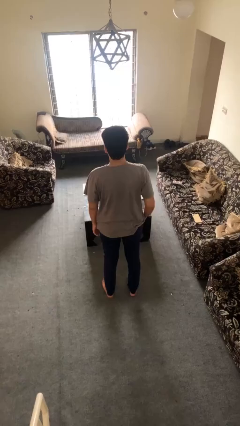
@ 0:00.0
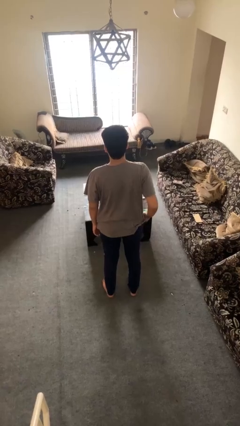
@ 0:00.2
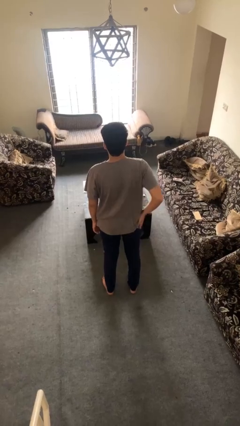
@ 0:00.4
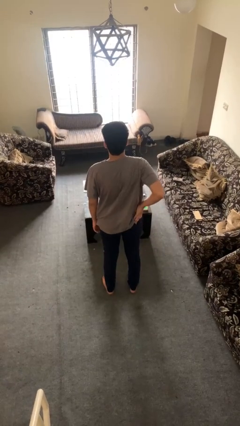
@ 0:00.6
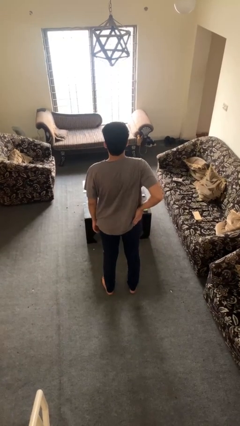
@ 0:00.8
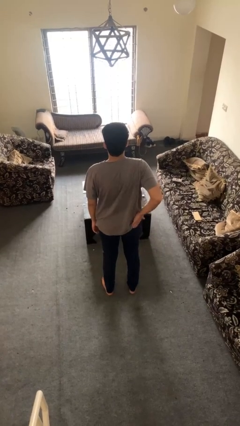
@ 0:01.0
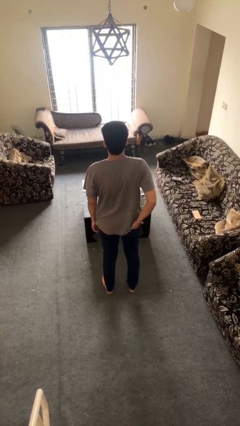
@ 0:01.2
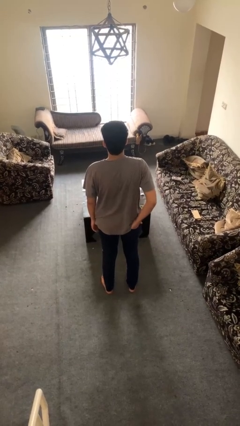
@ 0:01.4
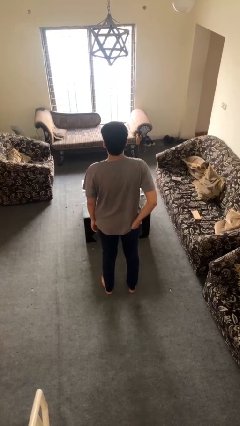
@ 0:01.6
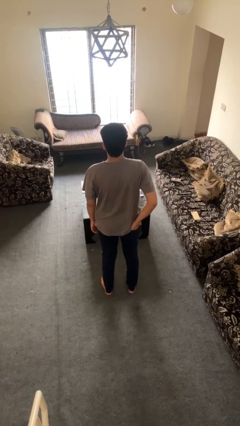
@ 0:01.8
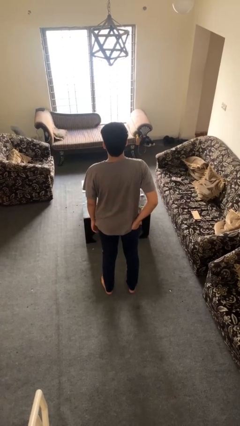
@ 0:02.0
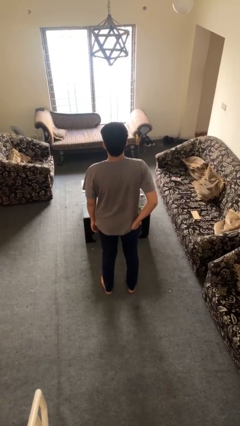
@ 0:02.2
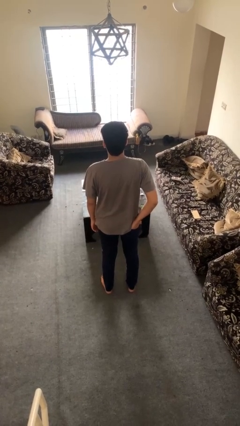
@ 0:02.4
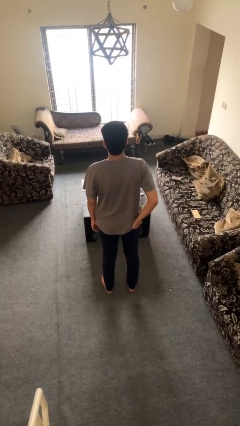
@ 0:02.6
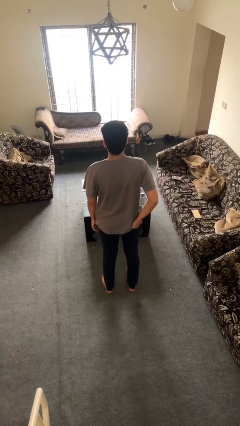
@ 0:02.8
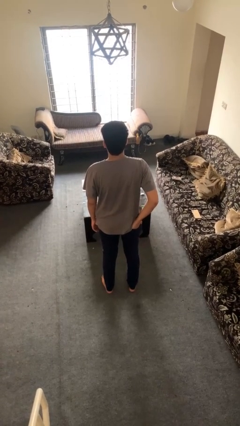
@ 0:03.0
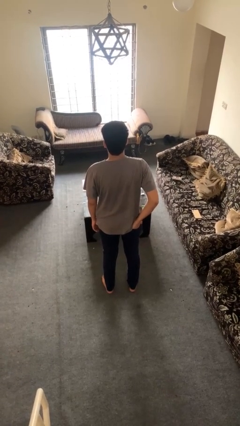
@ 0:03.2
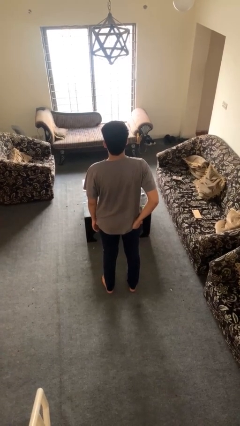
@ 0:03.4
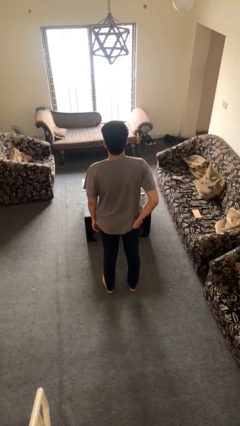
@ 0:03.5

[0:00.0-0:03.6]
person puts hands in back pockets

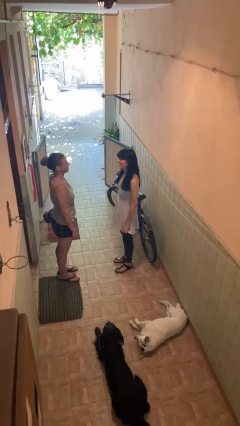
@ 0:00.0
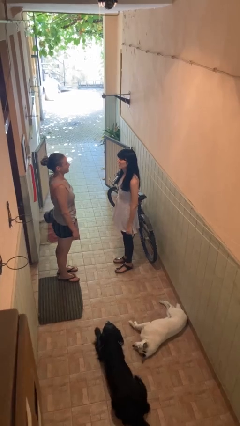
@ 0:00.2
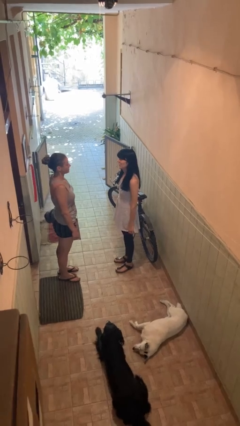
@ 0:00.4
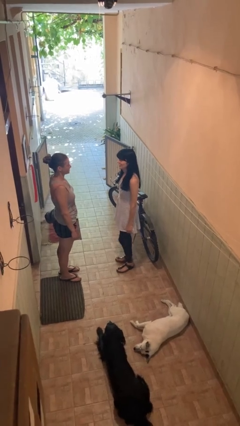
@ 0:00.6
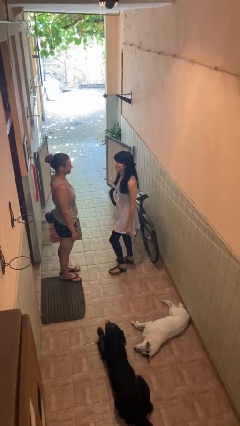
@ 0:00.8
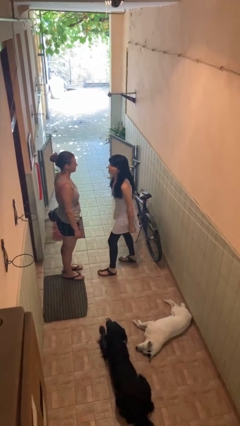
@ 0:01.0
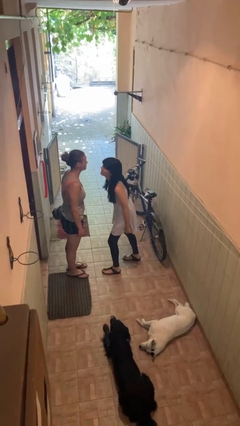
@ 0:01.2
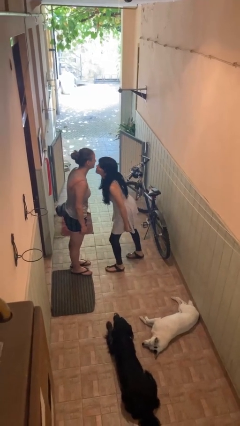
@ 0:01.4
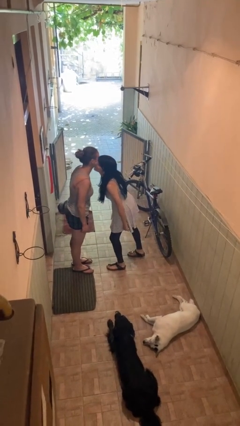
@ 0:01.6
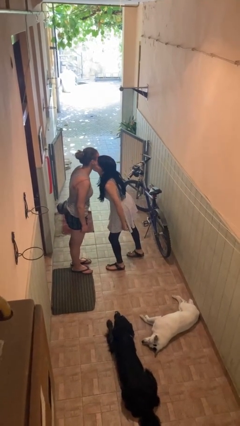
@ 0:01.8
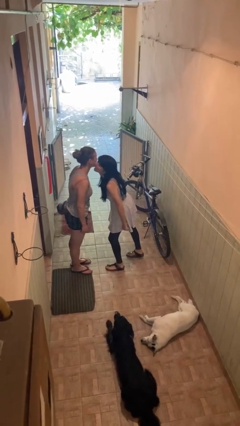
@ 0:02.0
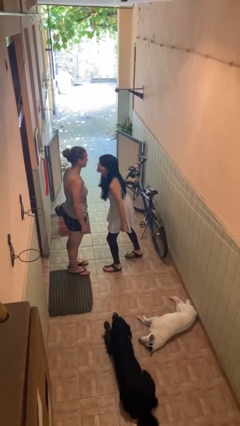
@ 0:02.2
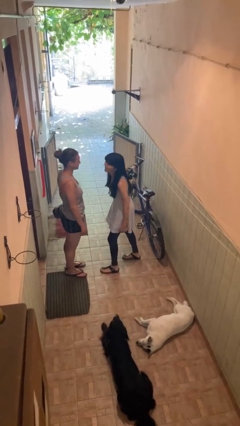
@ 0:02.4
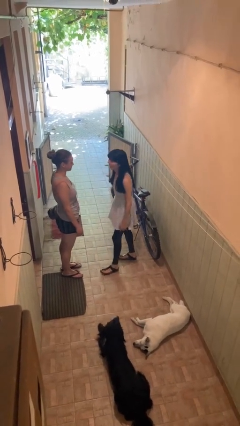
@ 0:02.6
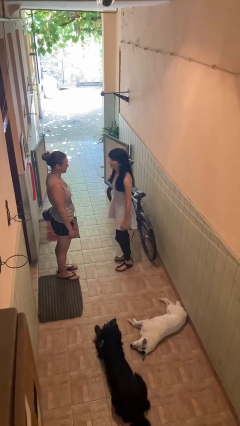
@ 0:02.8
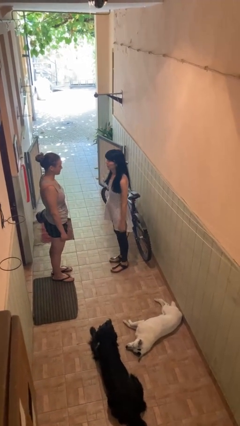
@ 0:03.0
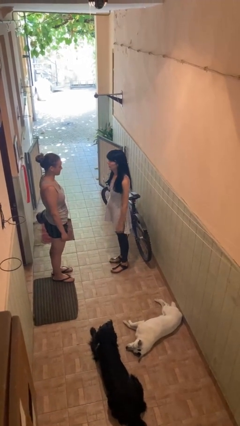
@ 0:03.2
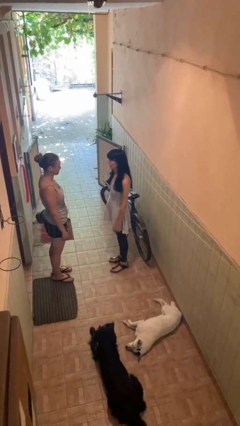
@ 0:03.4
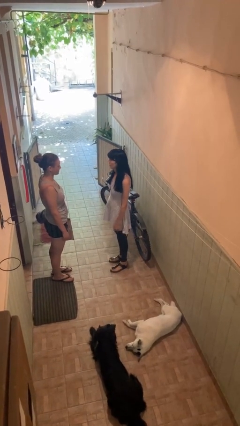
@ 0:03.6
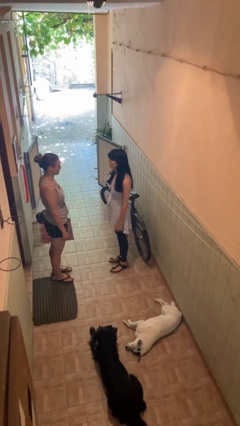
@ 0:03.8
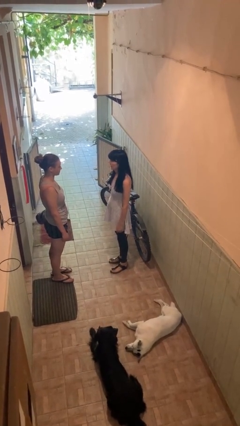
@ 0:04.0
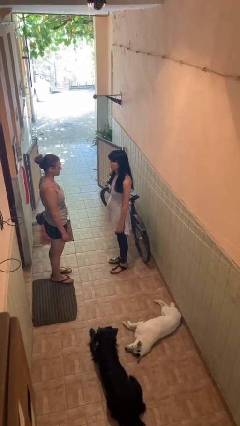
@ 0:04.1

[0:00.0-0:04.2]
person kisses cheek of person

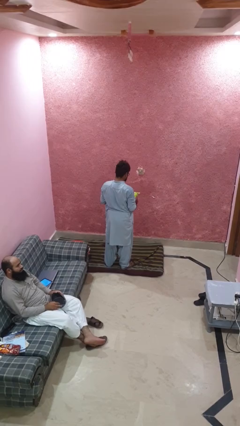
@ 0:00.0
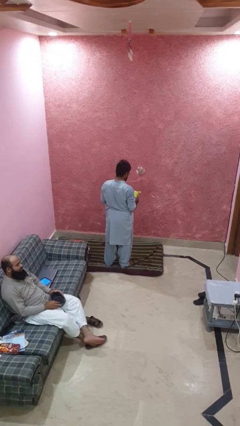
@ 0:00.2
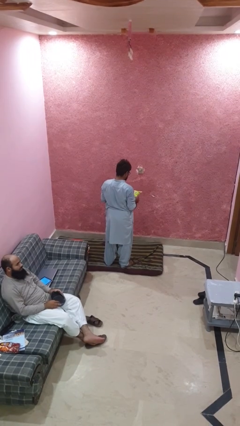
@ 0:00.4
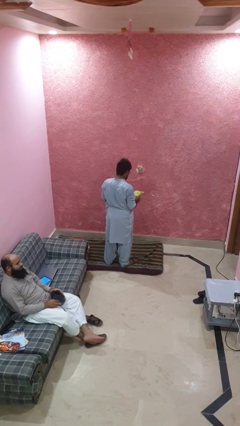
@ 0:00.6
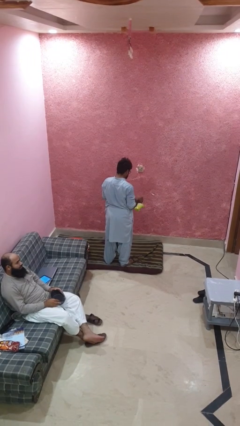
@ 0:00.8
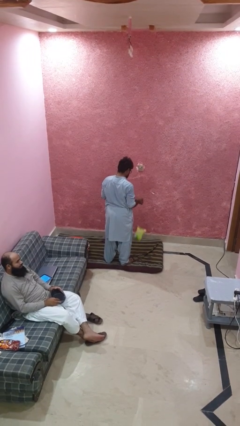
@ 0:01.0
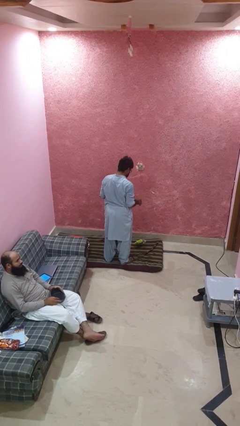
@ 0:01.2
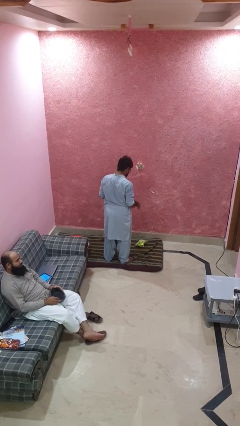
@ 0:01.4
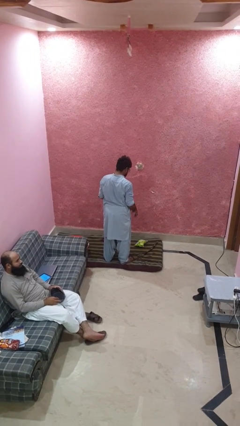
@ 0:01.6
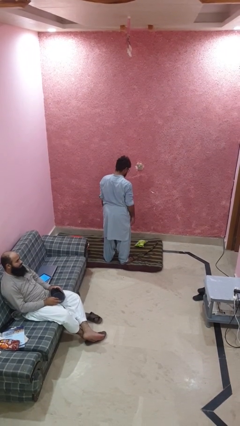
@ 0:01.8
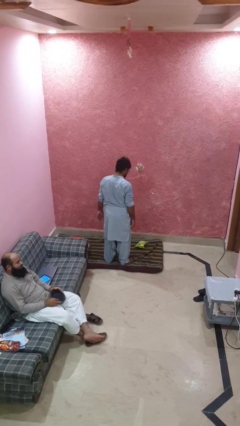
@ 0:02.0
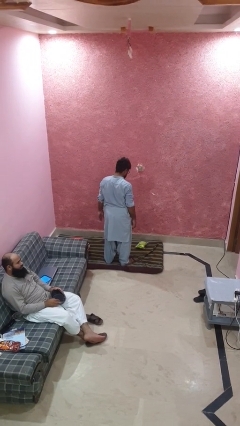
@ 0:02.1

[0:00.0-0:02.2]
person drops object

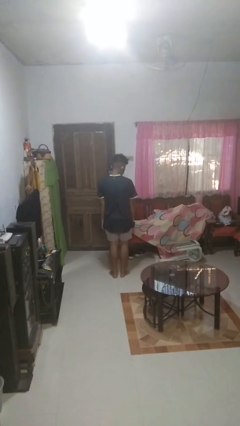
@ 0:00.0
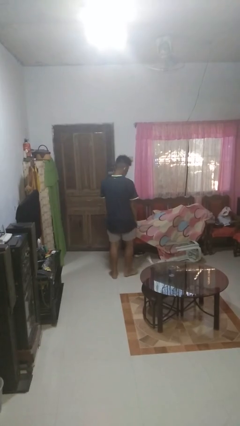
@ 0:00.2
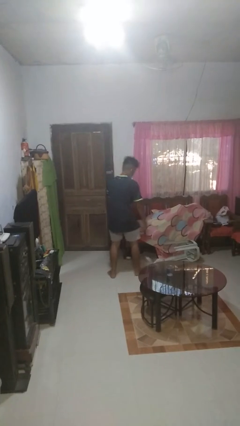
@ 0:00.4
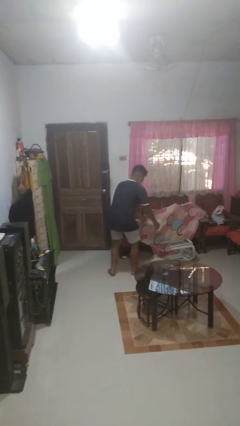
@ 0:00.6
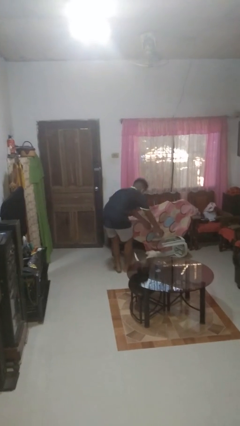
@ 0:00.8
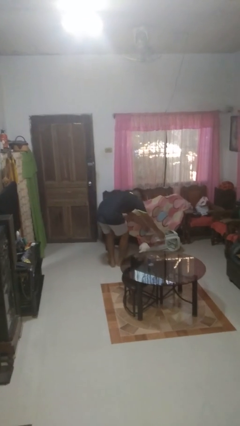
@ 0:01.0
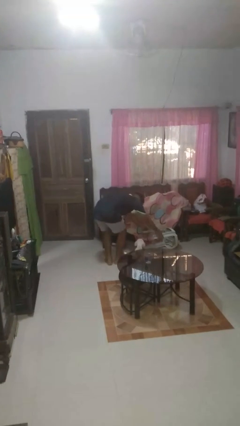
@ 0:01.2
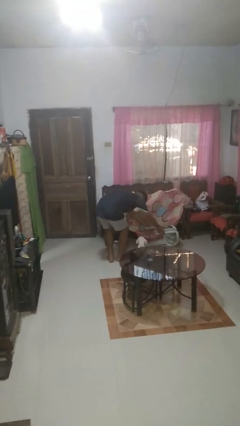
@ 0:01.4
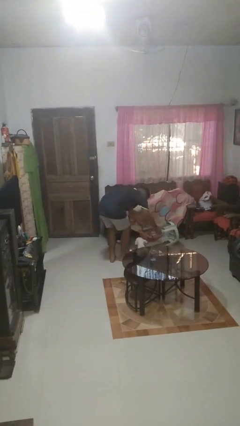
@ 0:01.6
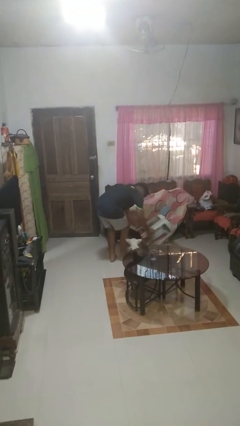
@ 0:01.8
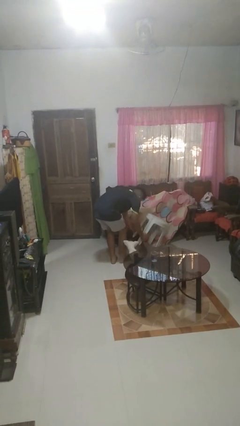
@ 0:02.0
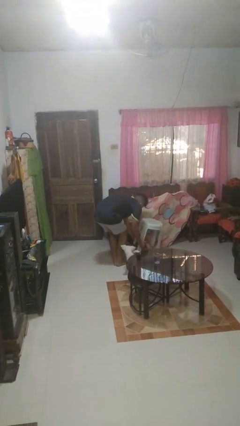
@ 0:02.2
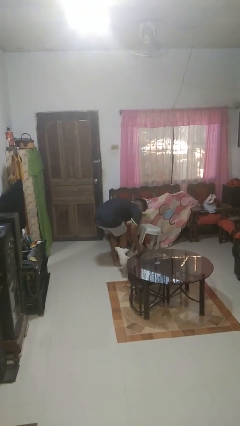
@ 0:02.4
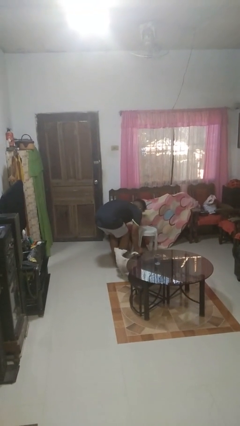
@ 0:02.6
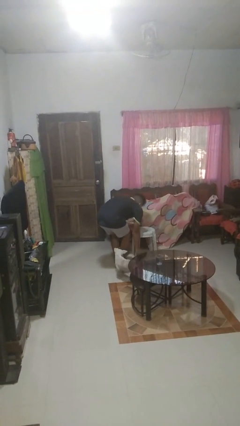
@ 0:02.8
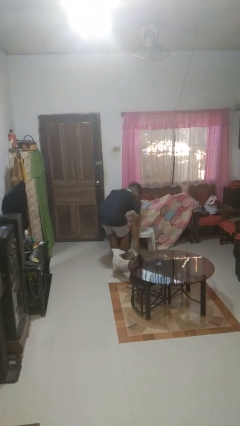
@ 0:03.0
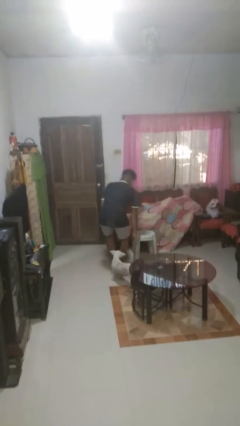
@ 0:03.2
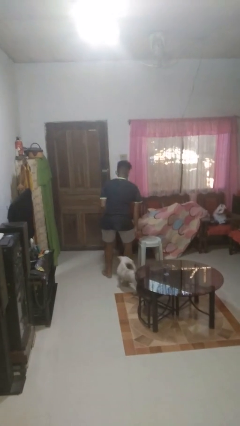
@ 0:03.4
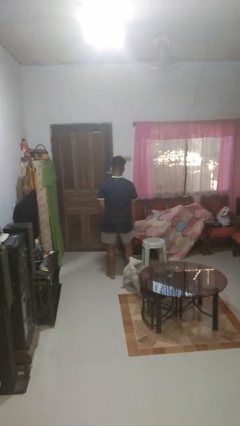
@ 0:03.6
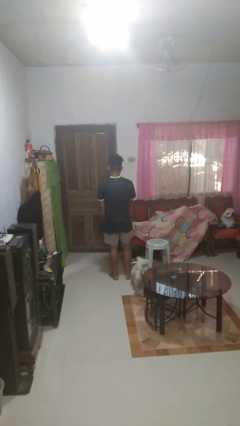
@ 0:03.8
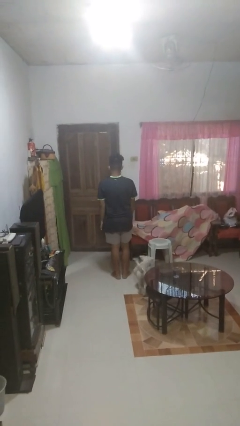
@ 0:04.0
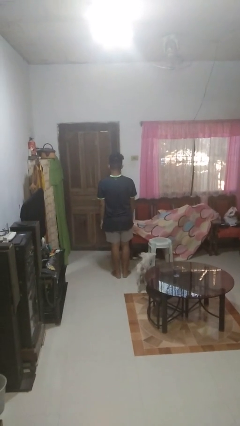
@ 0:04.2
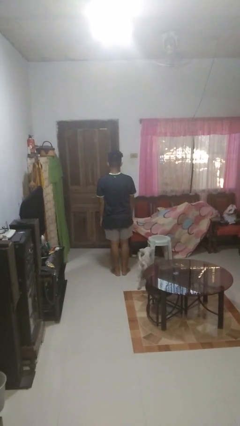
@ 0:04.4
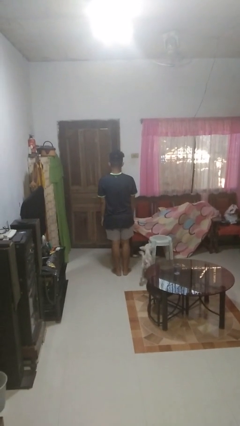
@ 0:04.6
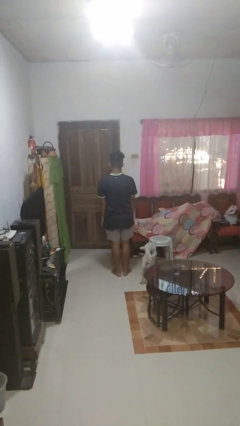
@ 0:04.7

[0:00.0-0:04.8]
person sets upright furniture

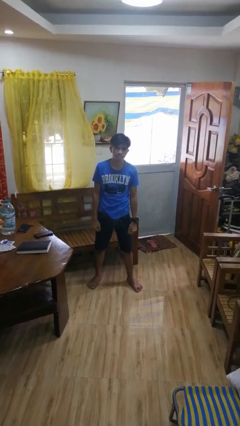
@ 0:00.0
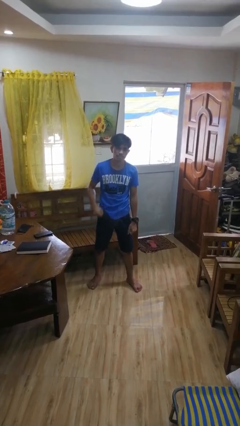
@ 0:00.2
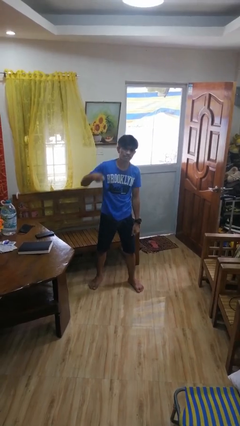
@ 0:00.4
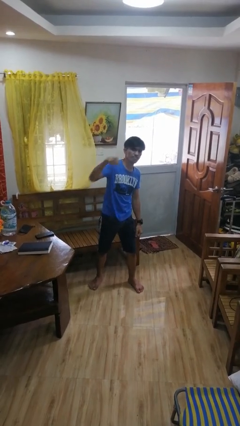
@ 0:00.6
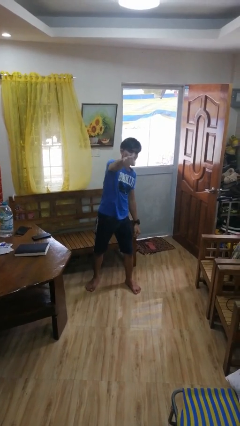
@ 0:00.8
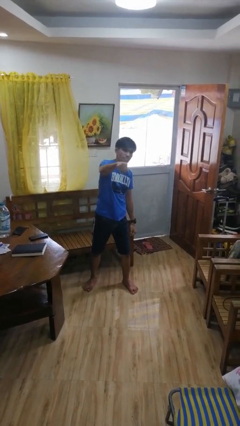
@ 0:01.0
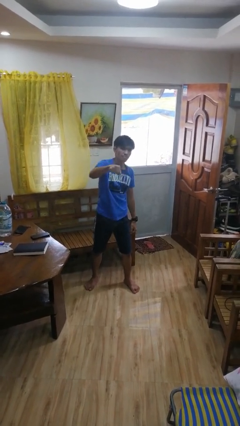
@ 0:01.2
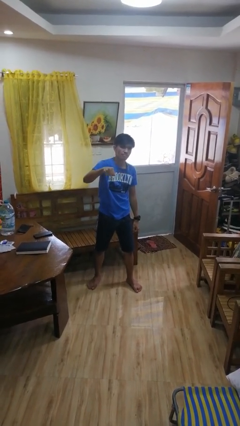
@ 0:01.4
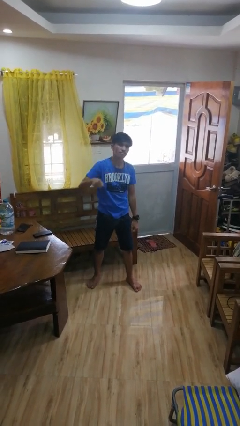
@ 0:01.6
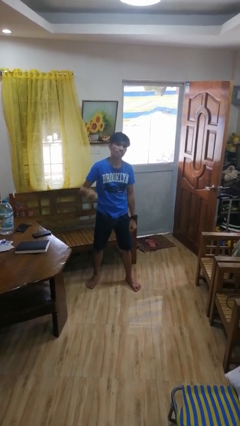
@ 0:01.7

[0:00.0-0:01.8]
person punches

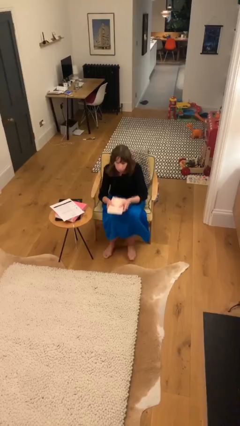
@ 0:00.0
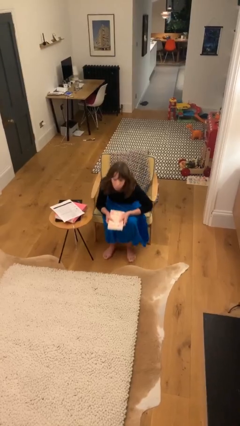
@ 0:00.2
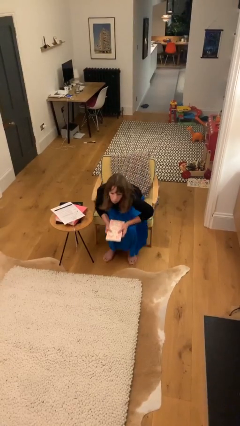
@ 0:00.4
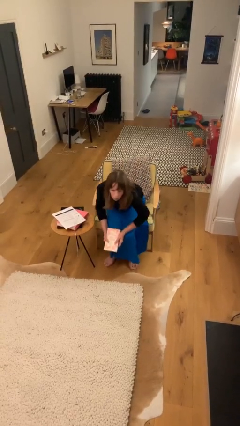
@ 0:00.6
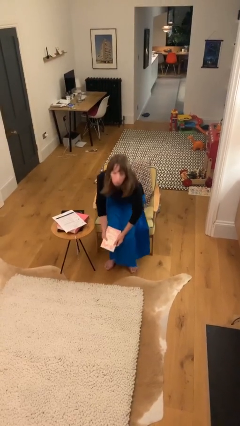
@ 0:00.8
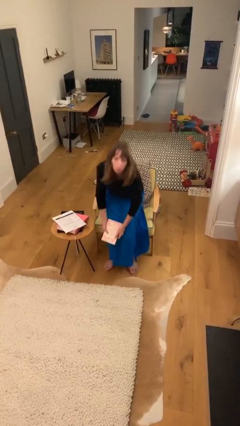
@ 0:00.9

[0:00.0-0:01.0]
person stands up
